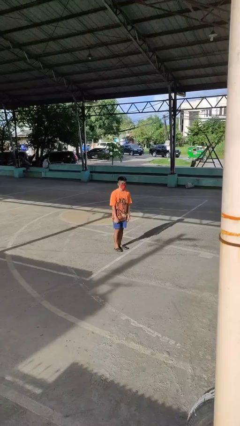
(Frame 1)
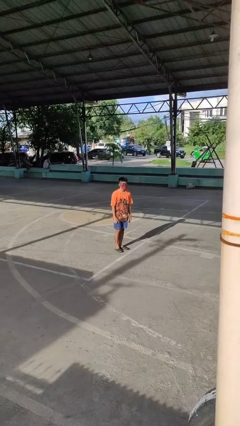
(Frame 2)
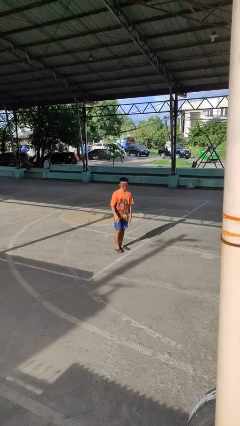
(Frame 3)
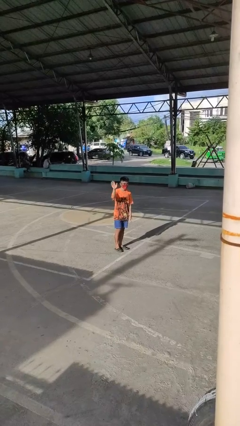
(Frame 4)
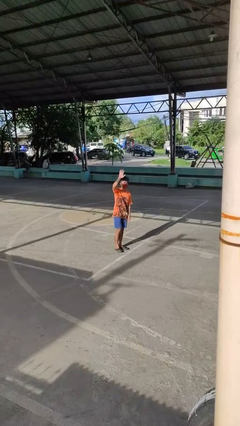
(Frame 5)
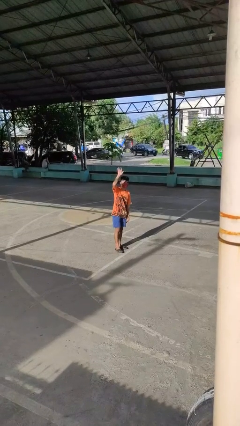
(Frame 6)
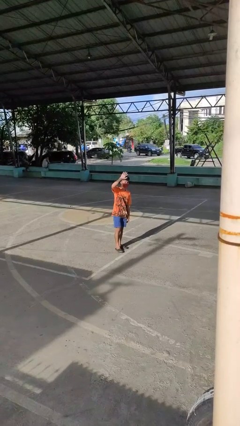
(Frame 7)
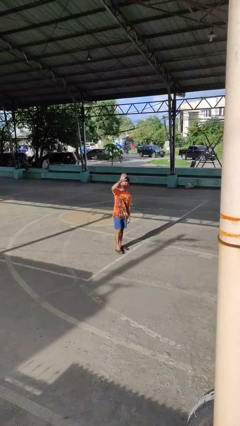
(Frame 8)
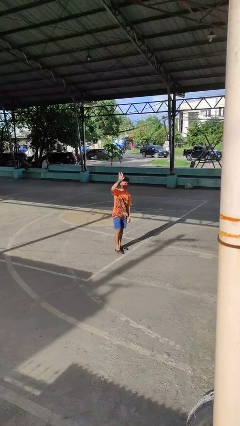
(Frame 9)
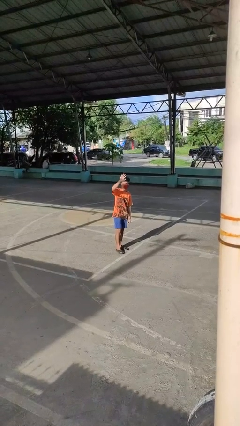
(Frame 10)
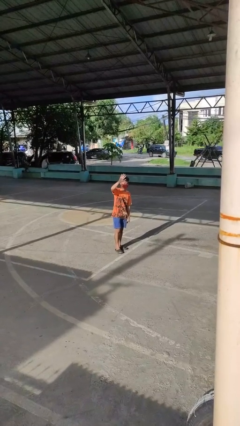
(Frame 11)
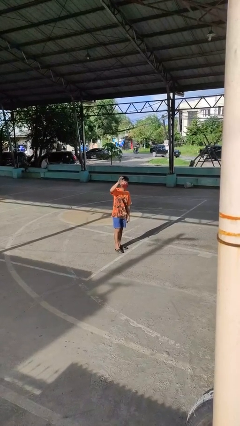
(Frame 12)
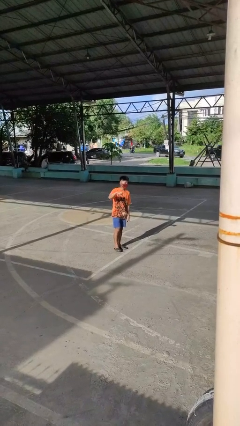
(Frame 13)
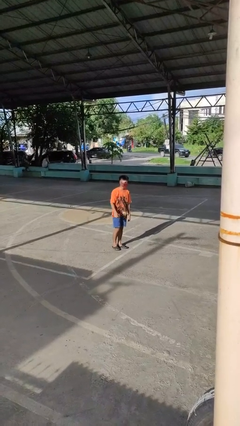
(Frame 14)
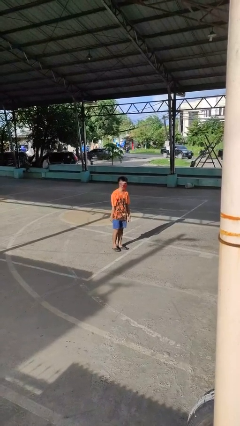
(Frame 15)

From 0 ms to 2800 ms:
person waves at person

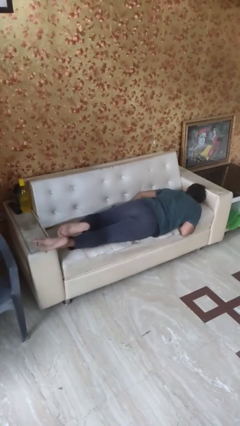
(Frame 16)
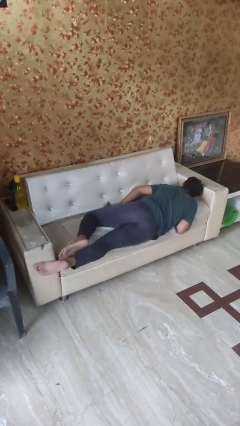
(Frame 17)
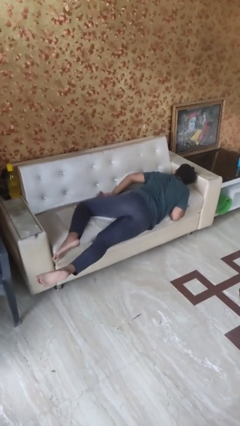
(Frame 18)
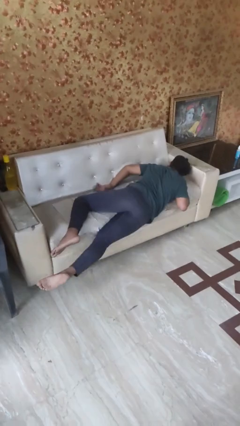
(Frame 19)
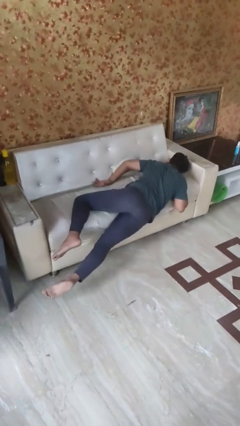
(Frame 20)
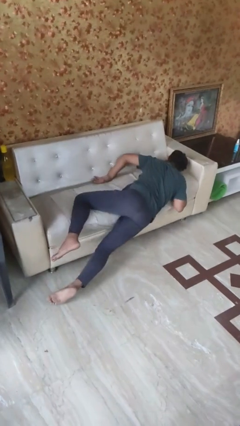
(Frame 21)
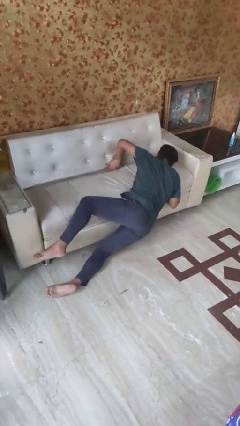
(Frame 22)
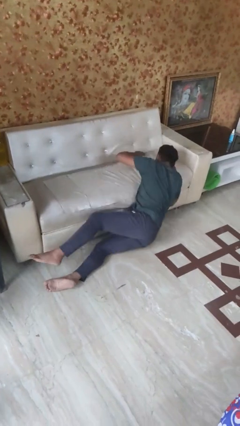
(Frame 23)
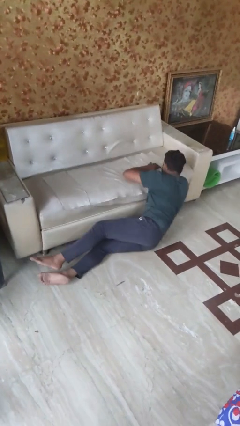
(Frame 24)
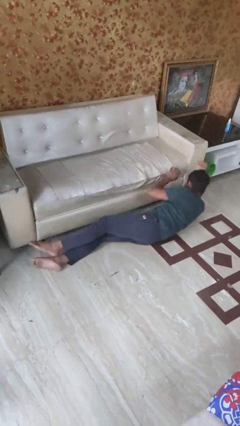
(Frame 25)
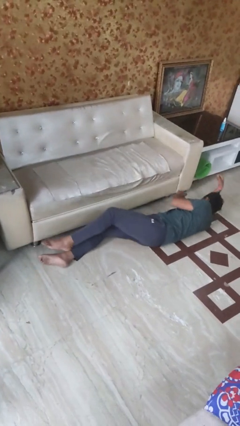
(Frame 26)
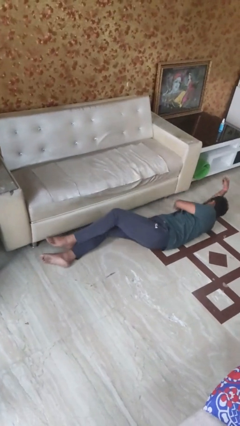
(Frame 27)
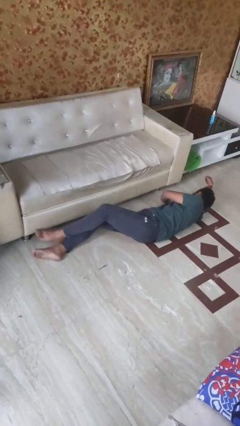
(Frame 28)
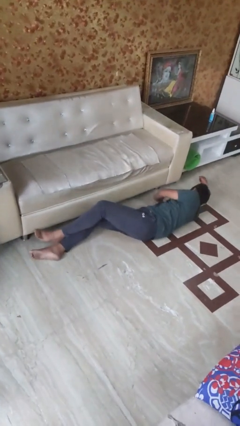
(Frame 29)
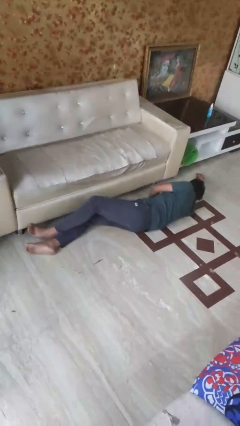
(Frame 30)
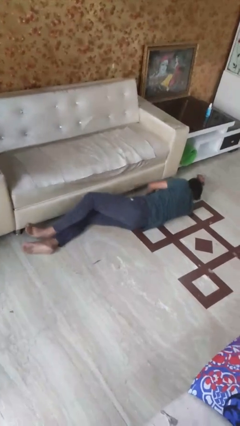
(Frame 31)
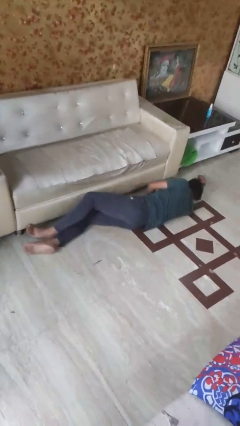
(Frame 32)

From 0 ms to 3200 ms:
person falls from bed

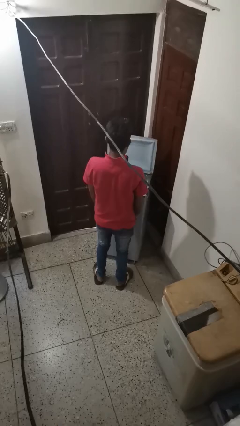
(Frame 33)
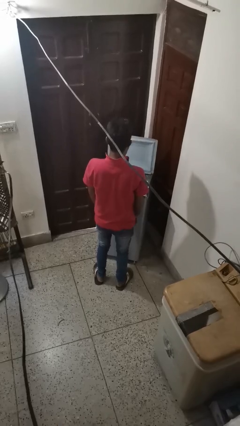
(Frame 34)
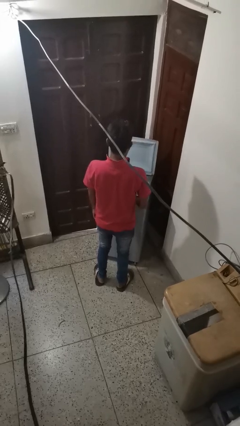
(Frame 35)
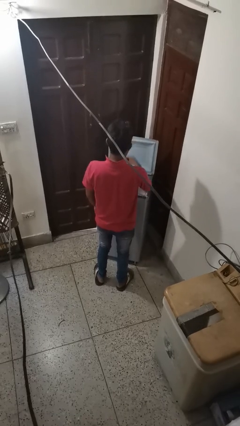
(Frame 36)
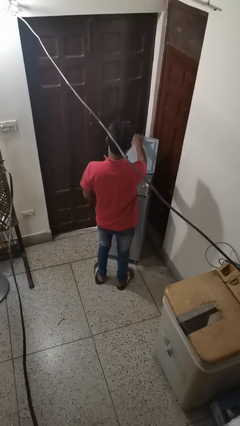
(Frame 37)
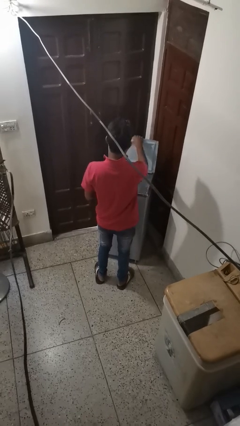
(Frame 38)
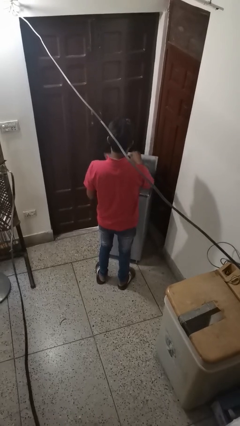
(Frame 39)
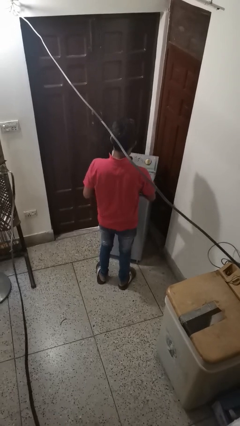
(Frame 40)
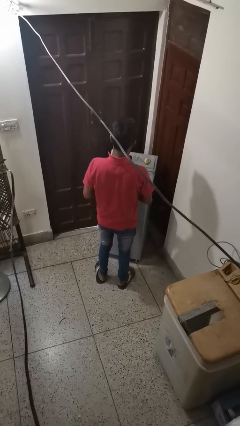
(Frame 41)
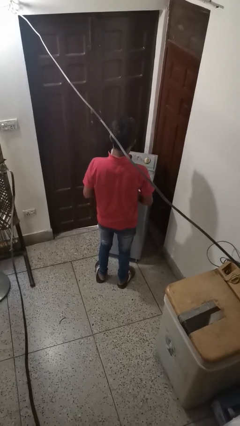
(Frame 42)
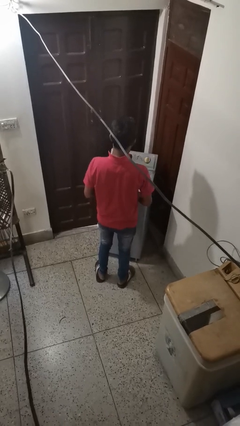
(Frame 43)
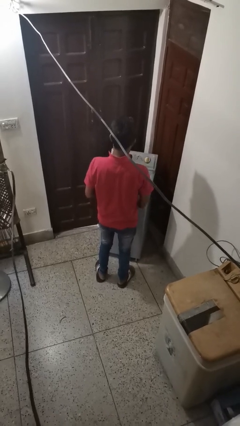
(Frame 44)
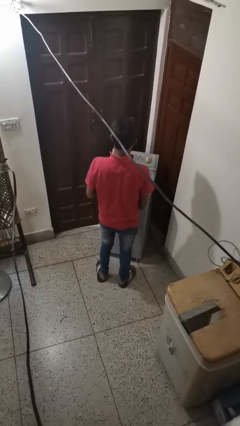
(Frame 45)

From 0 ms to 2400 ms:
person closes clothes washer

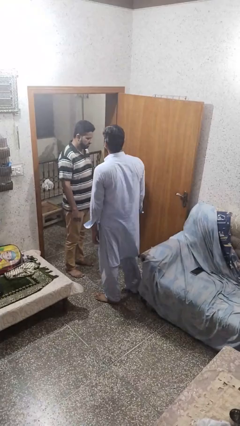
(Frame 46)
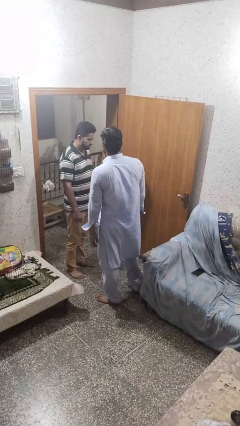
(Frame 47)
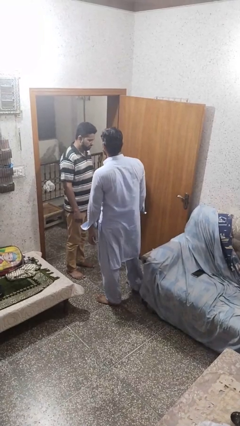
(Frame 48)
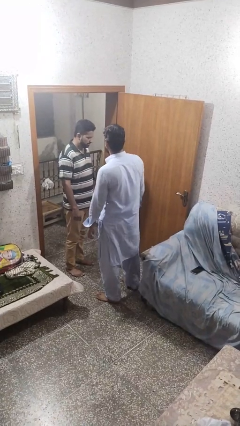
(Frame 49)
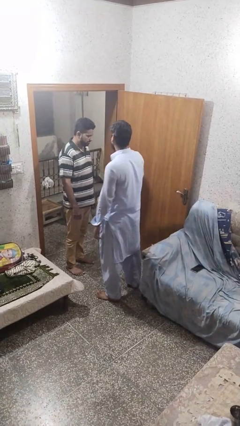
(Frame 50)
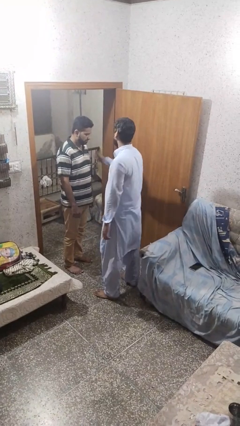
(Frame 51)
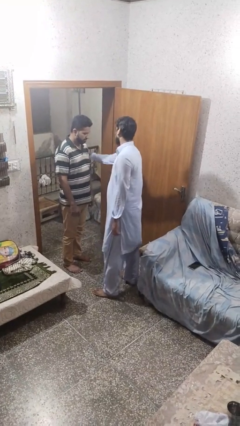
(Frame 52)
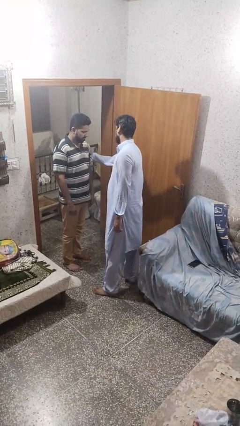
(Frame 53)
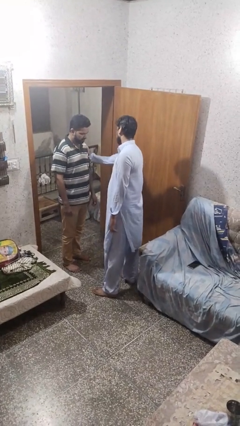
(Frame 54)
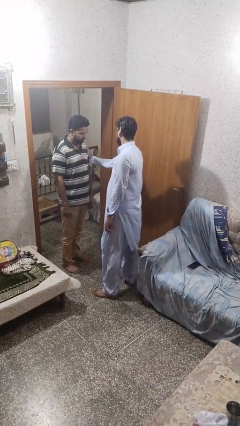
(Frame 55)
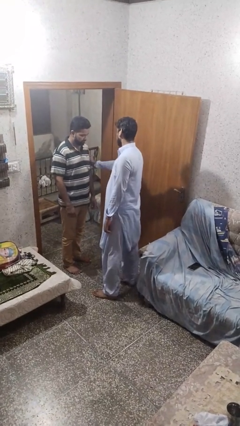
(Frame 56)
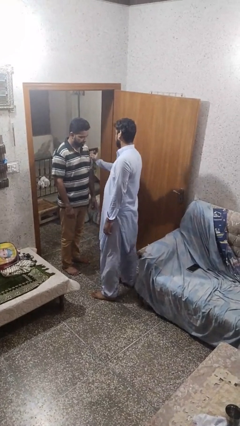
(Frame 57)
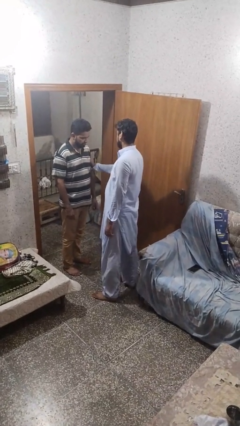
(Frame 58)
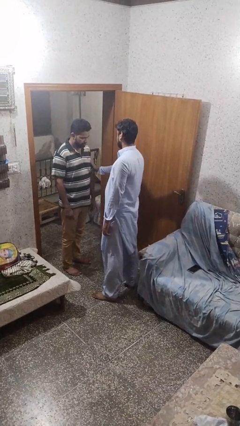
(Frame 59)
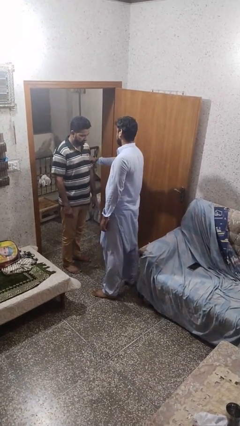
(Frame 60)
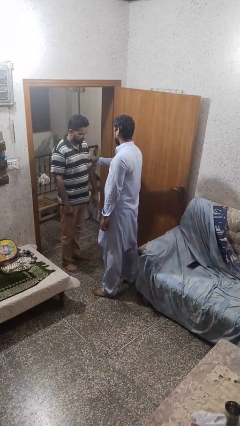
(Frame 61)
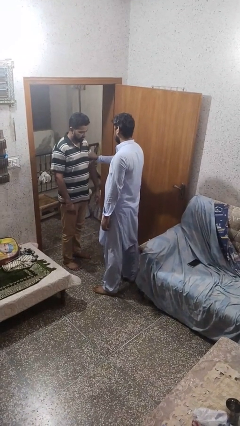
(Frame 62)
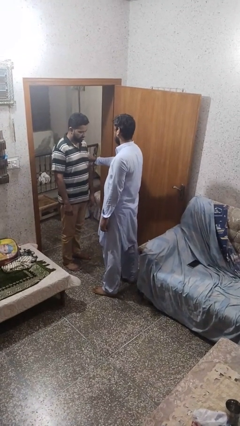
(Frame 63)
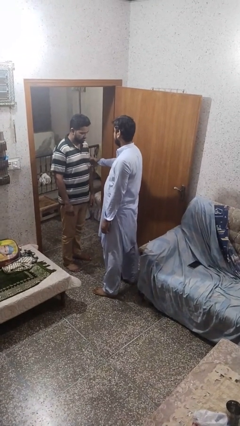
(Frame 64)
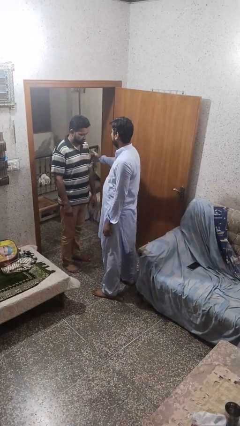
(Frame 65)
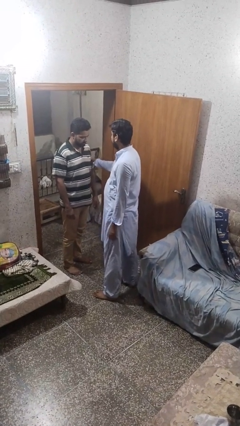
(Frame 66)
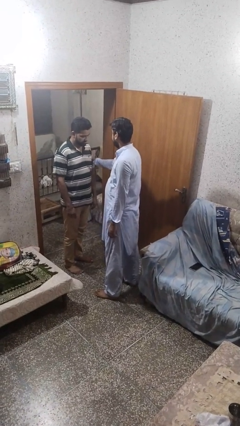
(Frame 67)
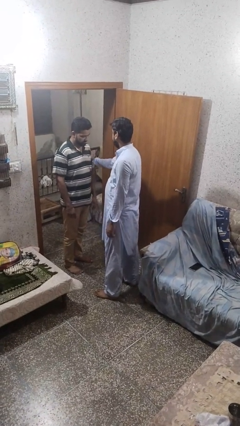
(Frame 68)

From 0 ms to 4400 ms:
person grabs person by bicep

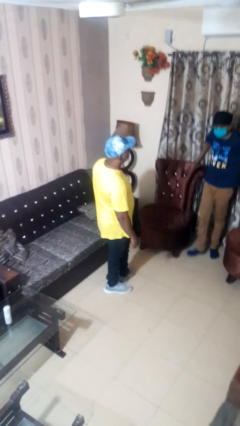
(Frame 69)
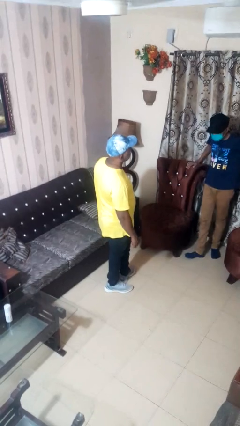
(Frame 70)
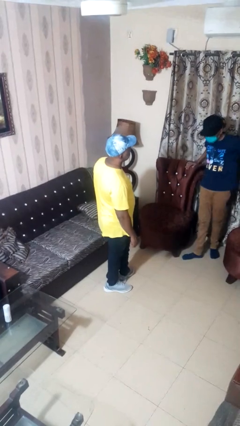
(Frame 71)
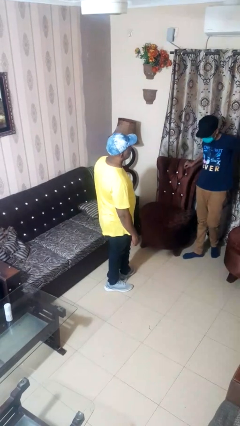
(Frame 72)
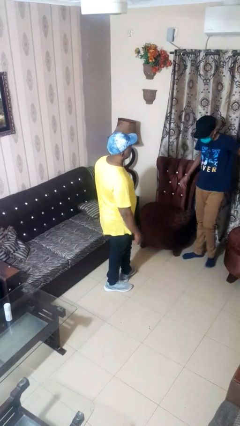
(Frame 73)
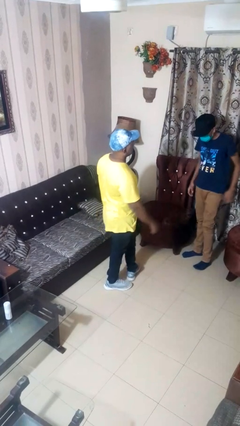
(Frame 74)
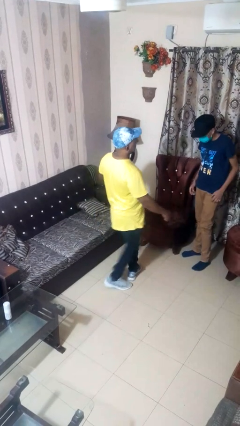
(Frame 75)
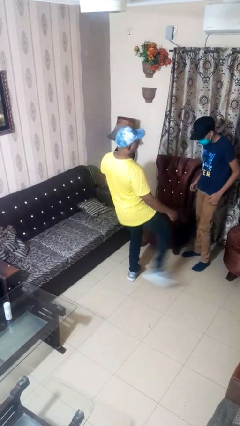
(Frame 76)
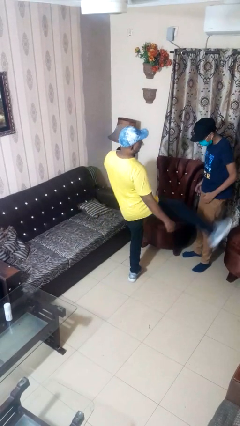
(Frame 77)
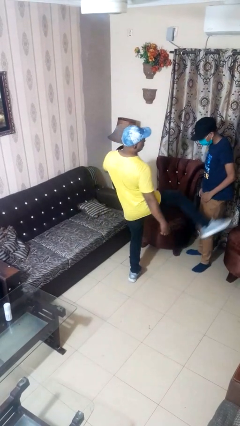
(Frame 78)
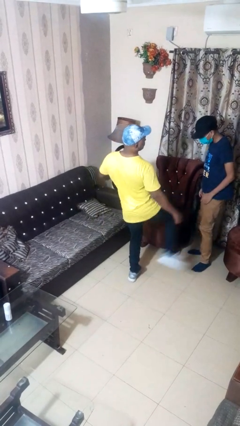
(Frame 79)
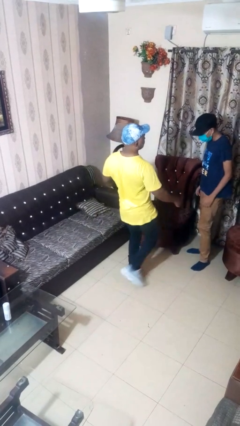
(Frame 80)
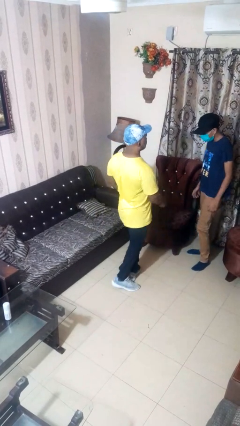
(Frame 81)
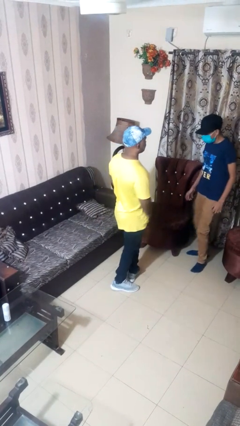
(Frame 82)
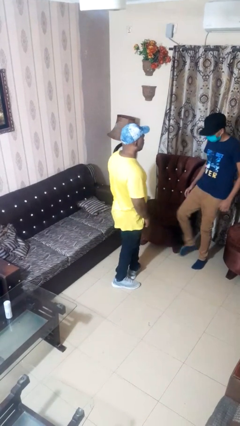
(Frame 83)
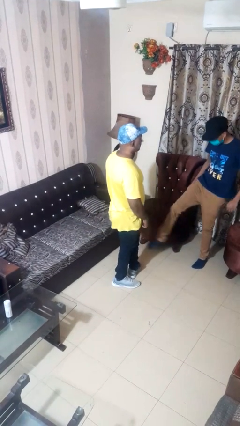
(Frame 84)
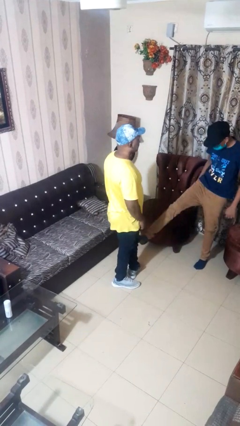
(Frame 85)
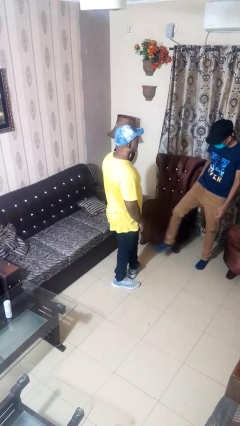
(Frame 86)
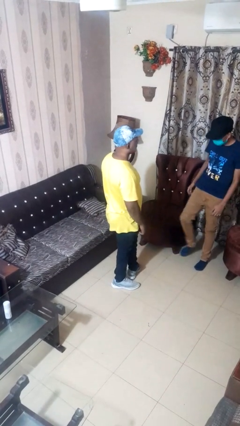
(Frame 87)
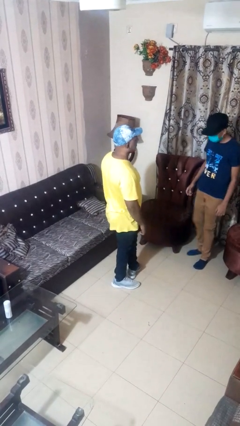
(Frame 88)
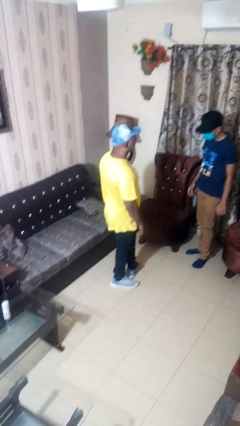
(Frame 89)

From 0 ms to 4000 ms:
person kicks object to person

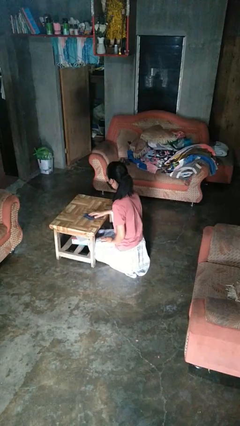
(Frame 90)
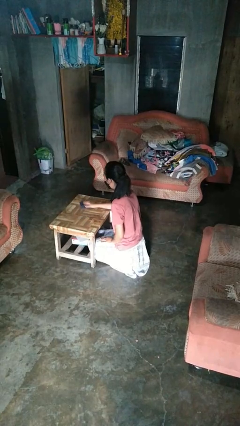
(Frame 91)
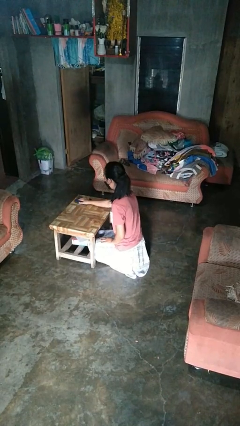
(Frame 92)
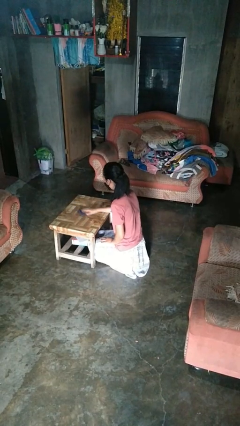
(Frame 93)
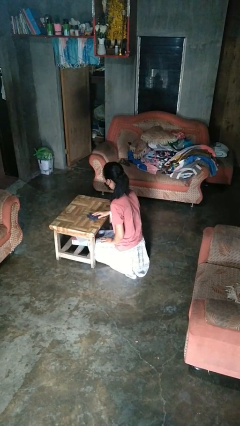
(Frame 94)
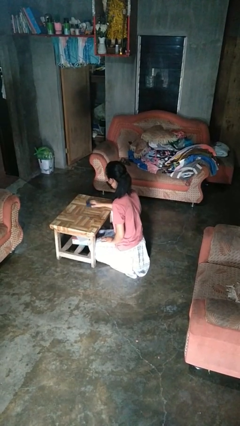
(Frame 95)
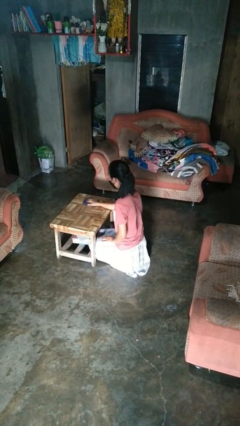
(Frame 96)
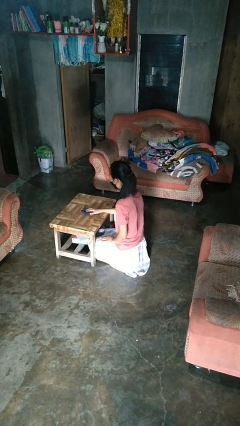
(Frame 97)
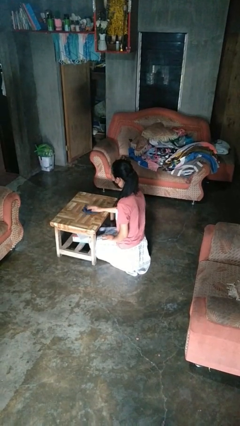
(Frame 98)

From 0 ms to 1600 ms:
person cleans table with rag
